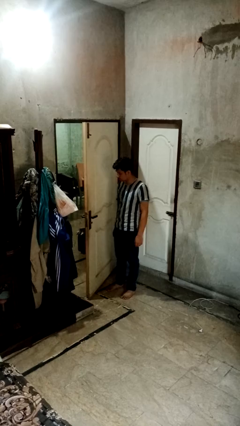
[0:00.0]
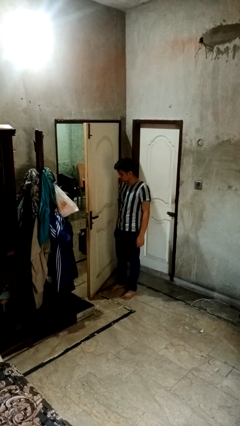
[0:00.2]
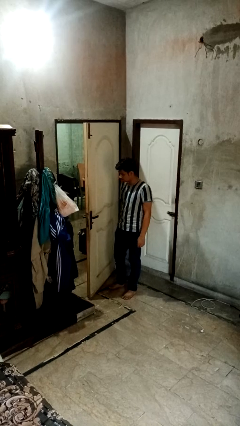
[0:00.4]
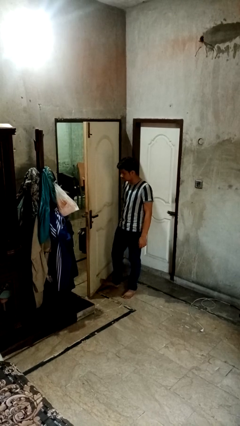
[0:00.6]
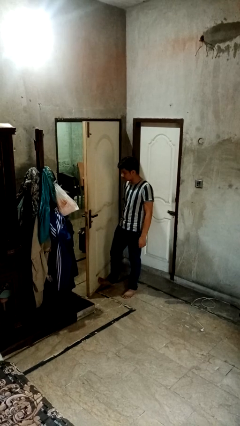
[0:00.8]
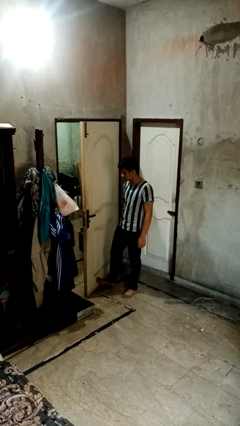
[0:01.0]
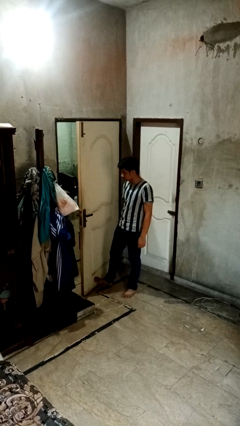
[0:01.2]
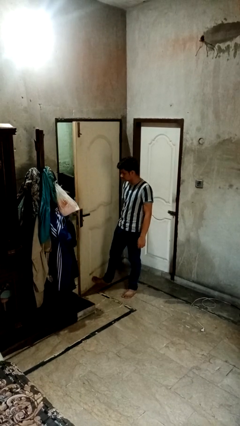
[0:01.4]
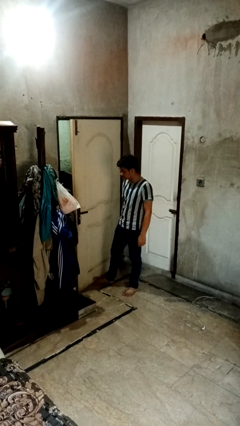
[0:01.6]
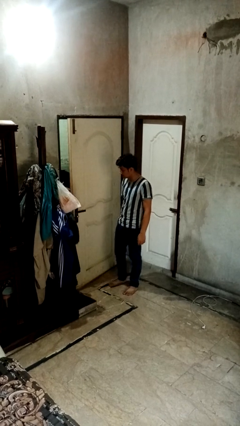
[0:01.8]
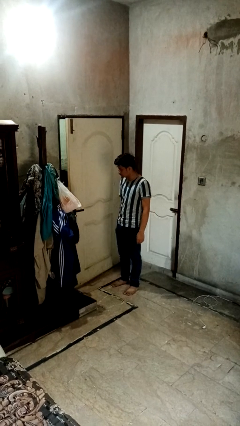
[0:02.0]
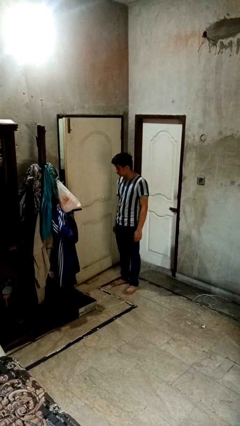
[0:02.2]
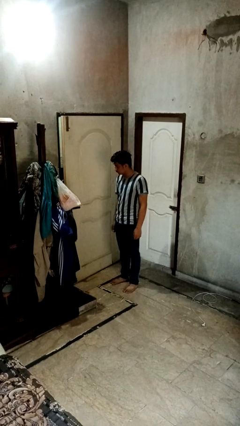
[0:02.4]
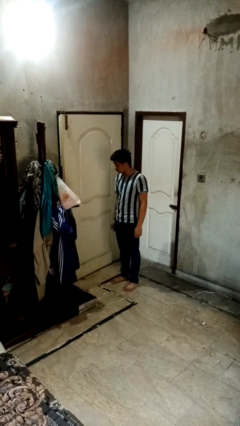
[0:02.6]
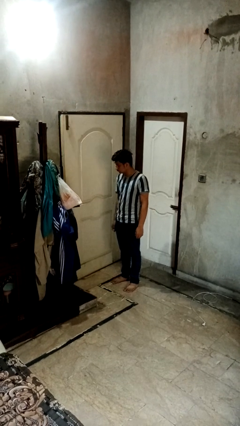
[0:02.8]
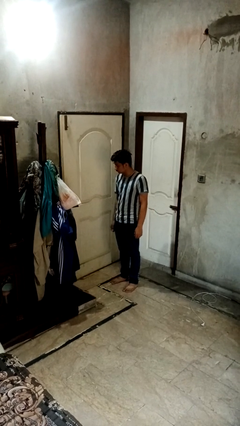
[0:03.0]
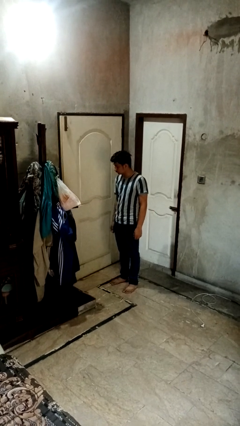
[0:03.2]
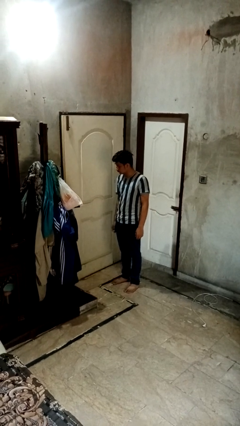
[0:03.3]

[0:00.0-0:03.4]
person closes door with foot

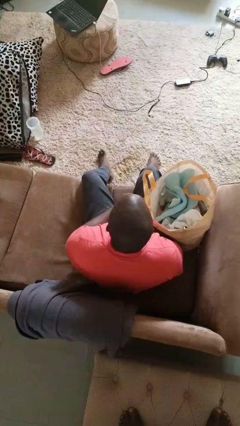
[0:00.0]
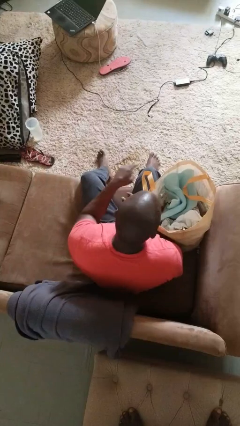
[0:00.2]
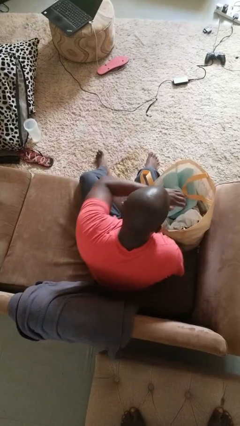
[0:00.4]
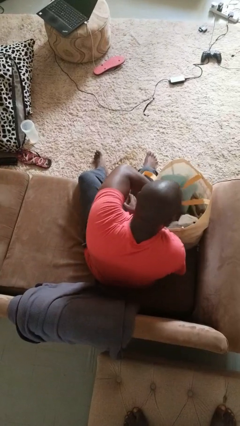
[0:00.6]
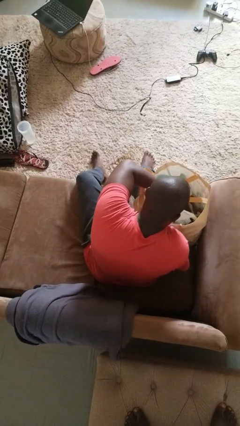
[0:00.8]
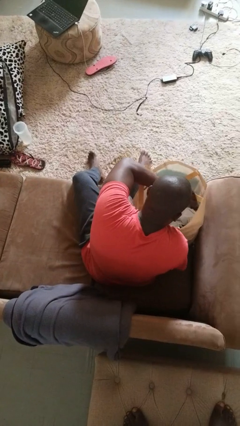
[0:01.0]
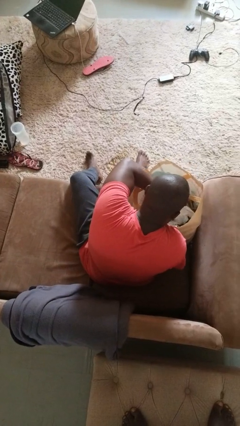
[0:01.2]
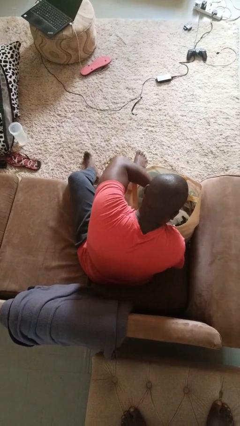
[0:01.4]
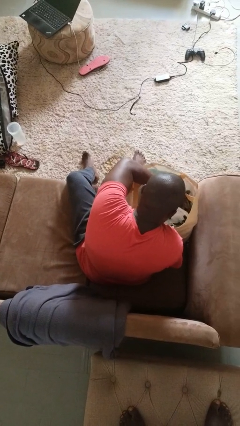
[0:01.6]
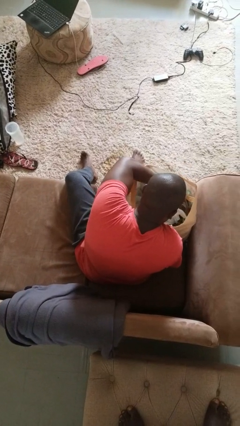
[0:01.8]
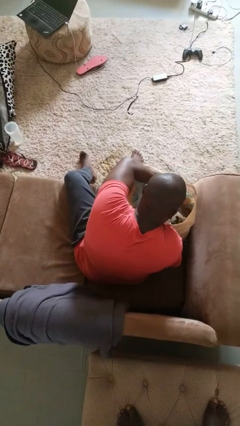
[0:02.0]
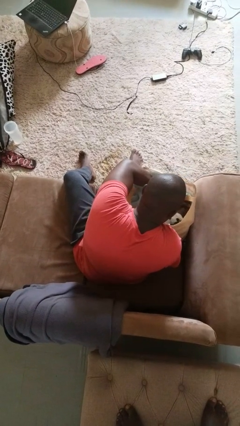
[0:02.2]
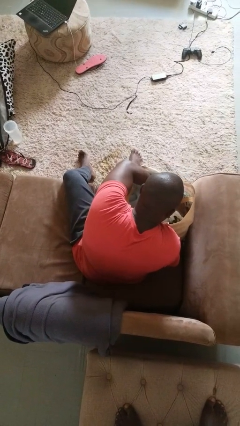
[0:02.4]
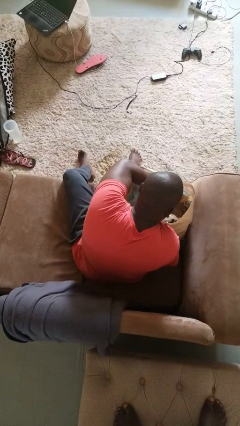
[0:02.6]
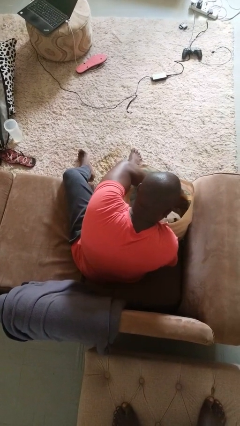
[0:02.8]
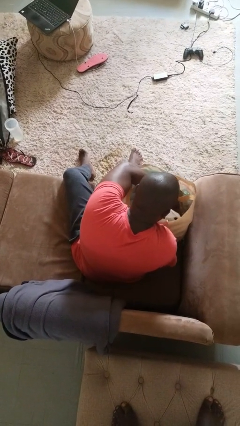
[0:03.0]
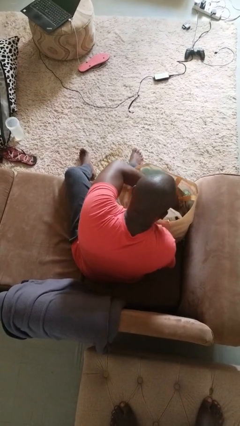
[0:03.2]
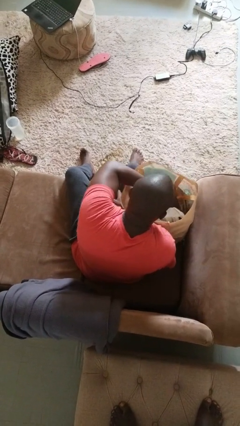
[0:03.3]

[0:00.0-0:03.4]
person searches in bag

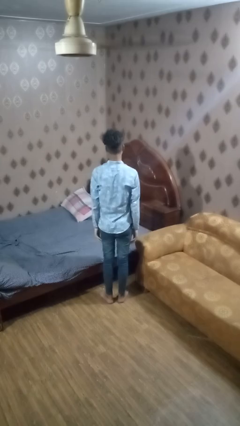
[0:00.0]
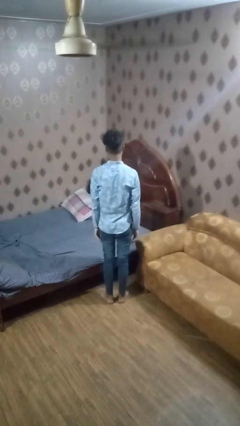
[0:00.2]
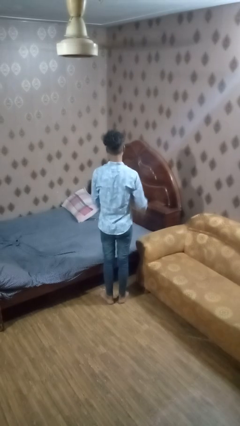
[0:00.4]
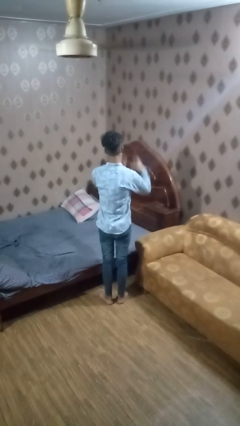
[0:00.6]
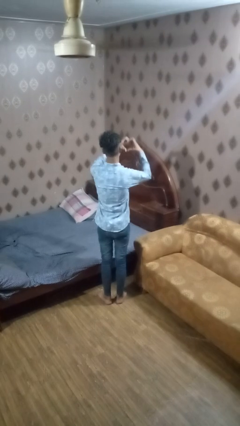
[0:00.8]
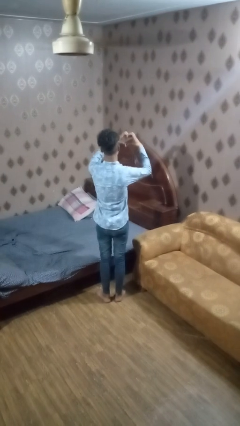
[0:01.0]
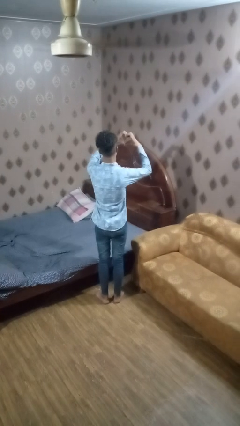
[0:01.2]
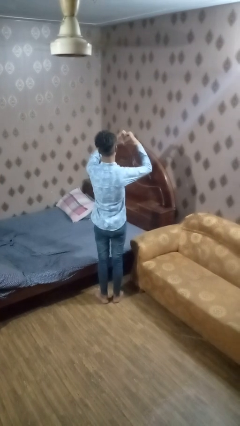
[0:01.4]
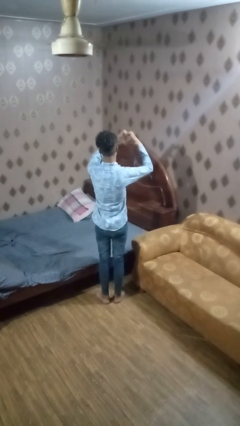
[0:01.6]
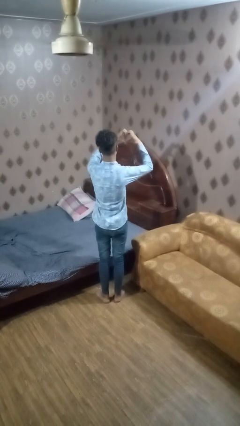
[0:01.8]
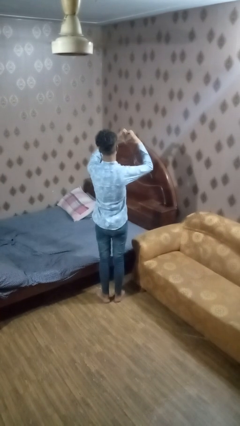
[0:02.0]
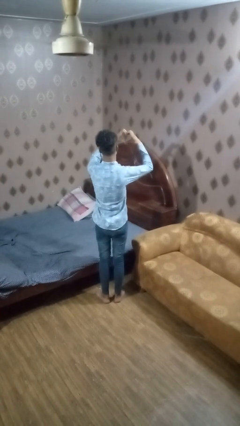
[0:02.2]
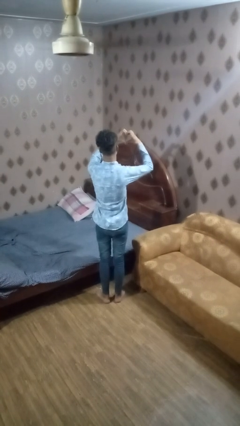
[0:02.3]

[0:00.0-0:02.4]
person gestures heart

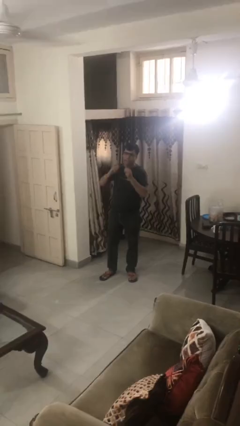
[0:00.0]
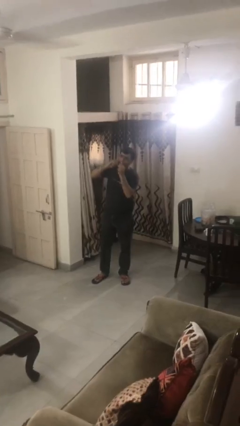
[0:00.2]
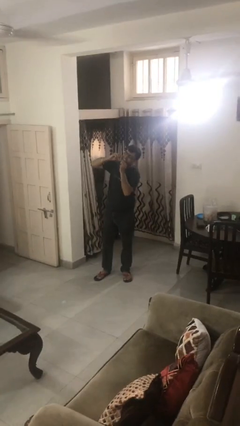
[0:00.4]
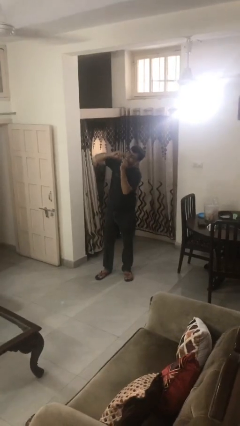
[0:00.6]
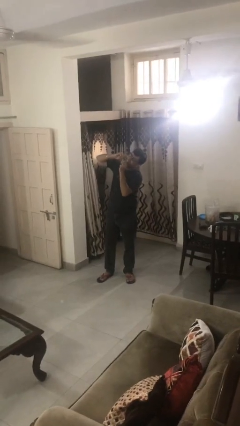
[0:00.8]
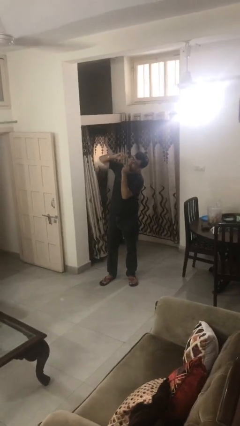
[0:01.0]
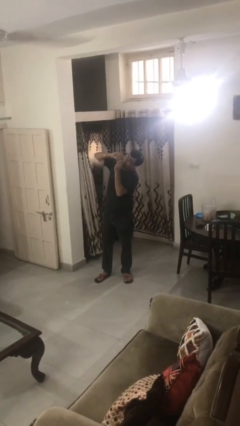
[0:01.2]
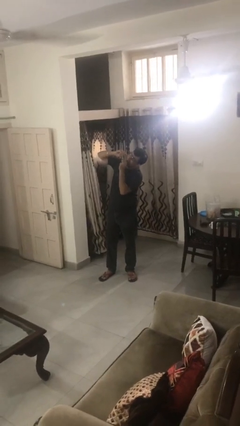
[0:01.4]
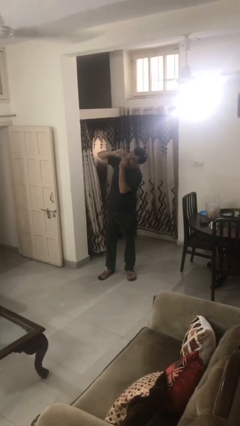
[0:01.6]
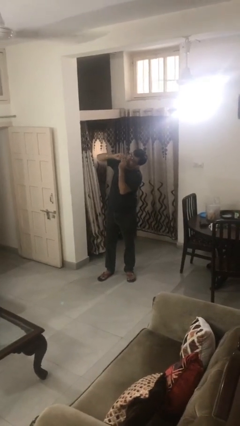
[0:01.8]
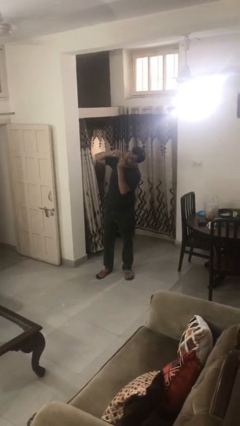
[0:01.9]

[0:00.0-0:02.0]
person flosses

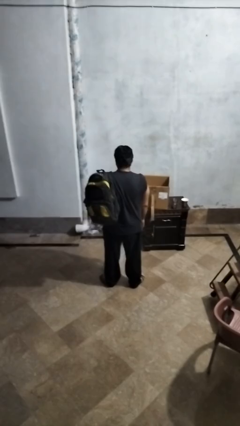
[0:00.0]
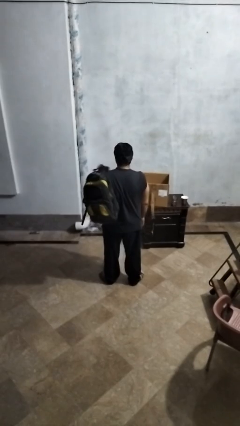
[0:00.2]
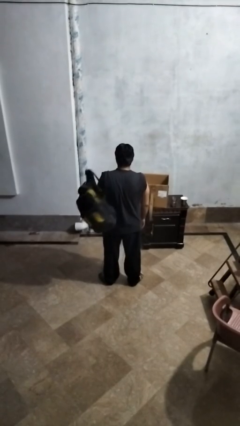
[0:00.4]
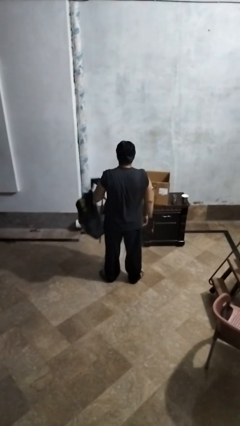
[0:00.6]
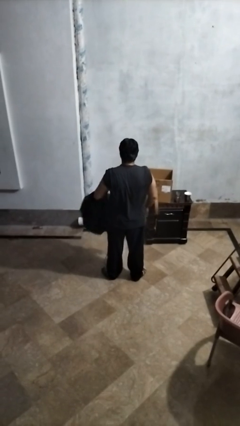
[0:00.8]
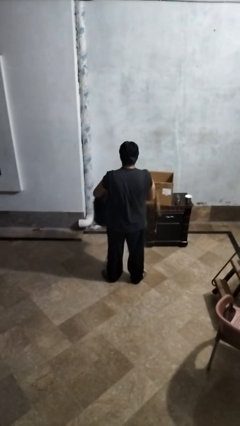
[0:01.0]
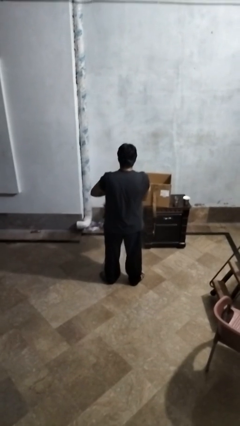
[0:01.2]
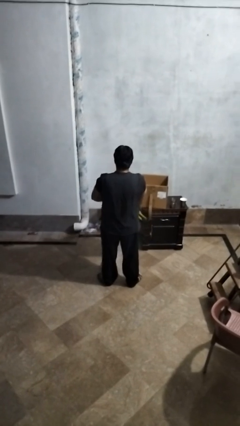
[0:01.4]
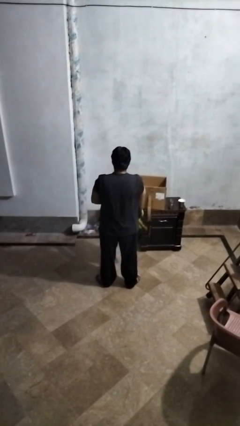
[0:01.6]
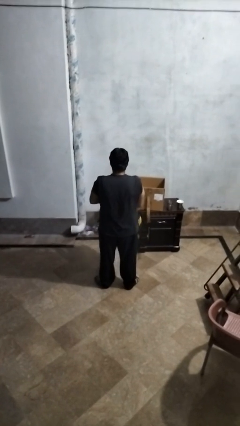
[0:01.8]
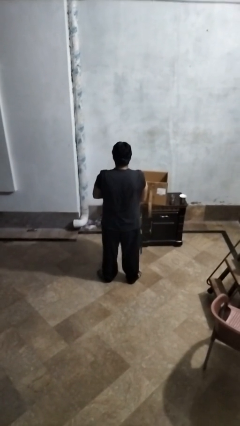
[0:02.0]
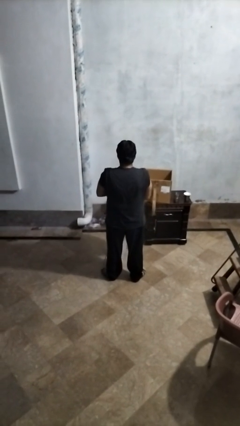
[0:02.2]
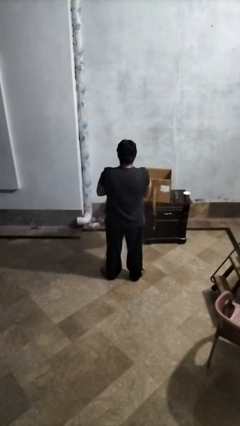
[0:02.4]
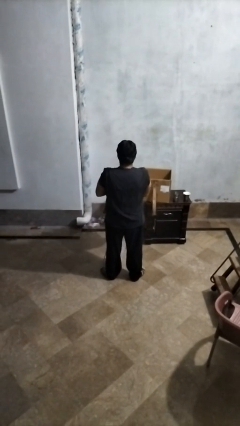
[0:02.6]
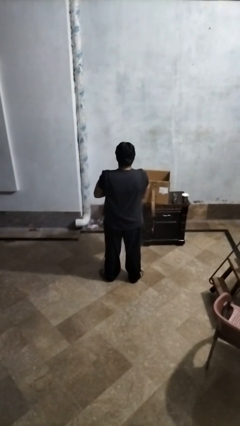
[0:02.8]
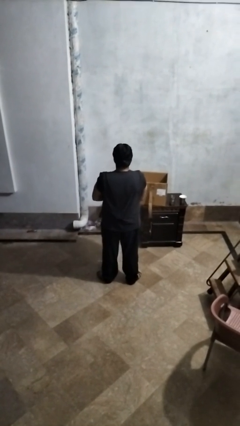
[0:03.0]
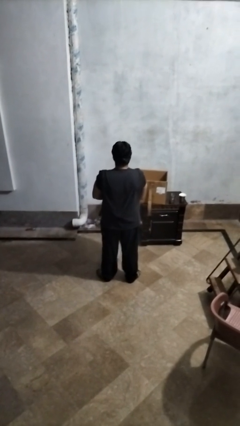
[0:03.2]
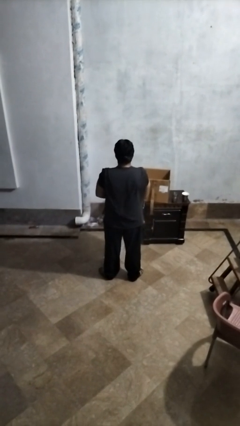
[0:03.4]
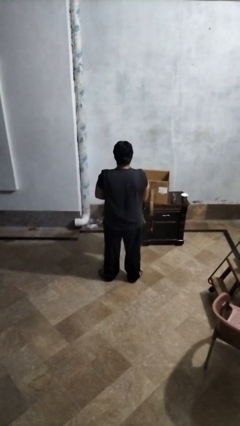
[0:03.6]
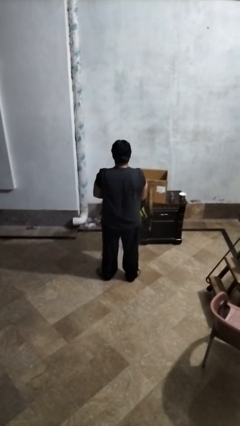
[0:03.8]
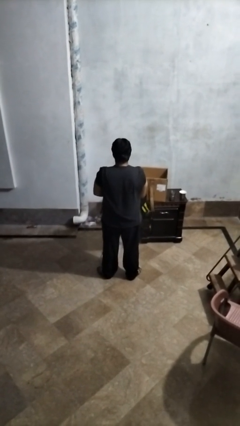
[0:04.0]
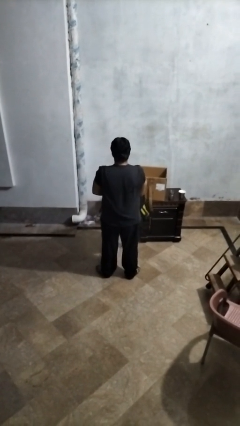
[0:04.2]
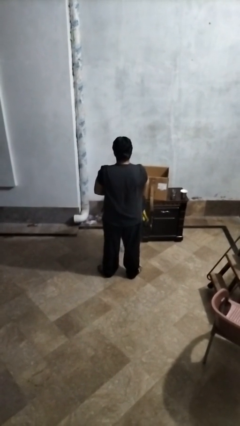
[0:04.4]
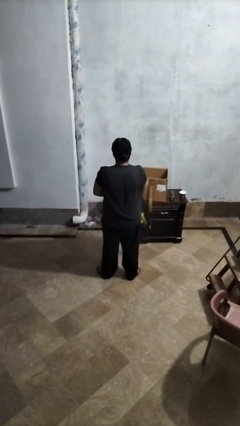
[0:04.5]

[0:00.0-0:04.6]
person takes off backpack

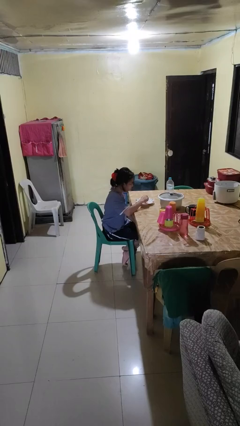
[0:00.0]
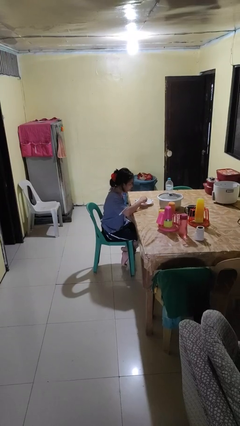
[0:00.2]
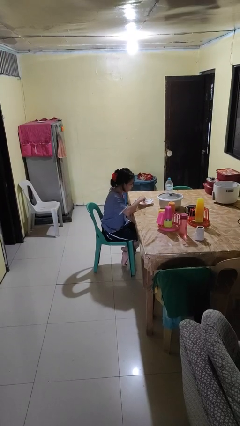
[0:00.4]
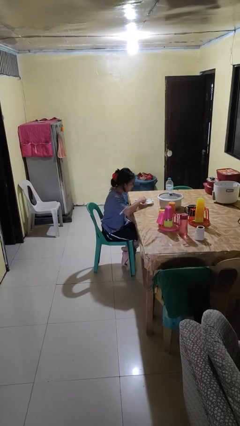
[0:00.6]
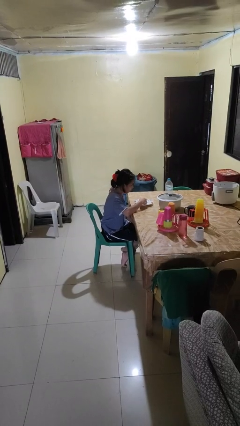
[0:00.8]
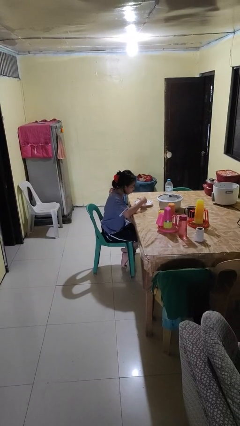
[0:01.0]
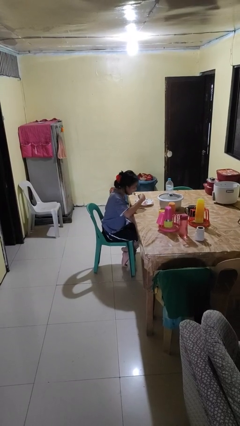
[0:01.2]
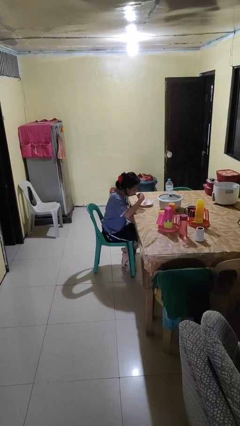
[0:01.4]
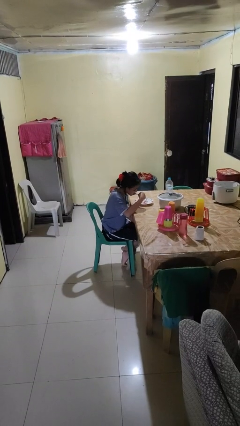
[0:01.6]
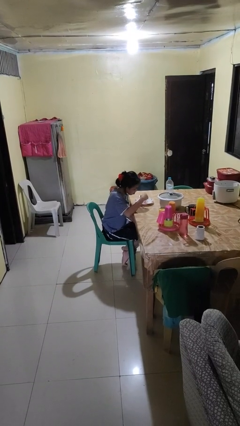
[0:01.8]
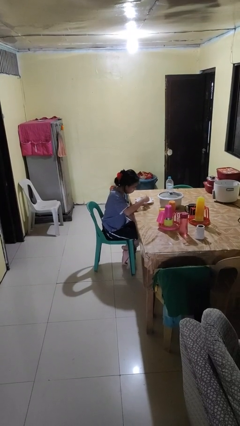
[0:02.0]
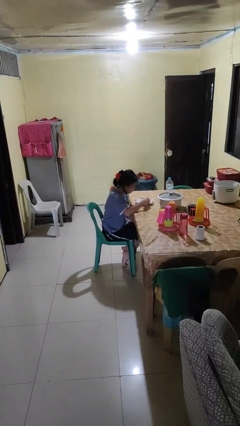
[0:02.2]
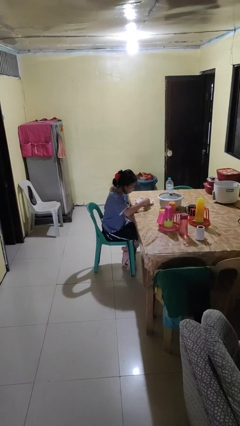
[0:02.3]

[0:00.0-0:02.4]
person eats with utensil
